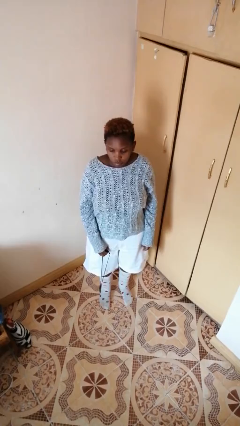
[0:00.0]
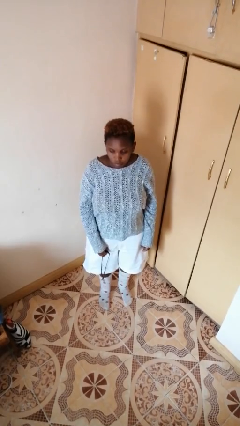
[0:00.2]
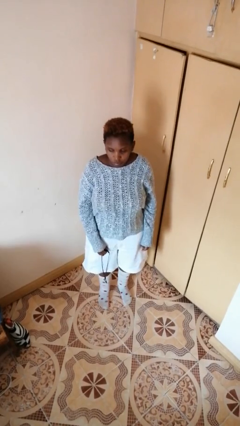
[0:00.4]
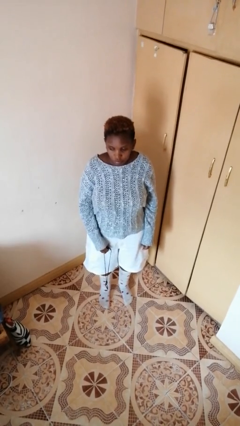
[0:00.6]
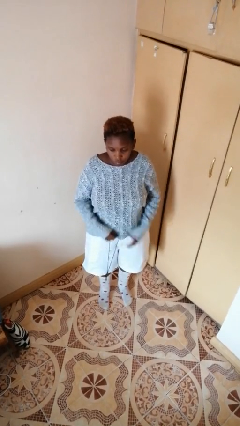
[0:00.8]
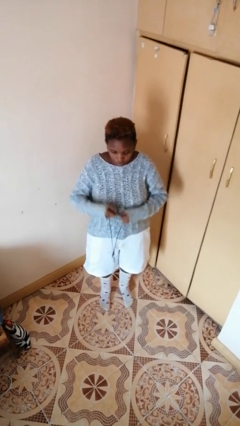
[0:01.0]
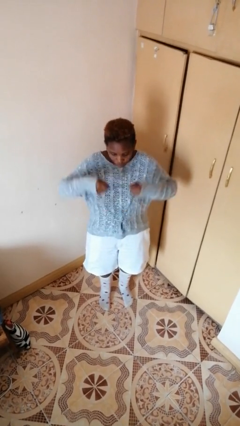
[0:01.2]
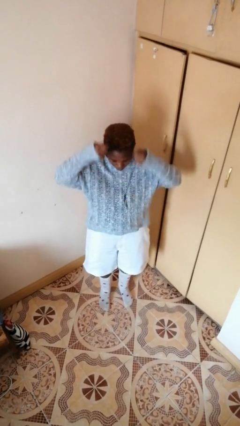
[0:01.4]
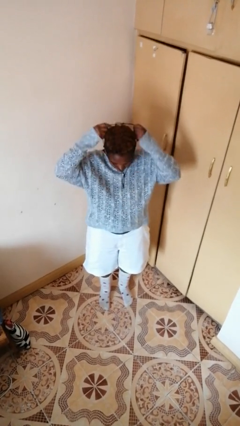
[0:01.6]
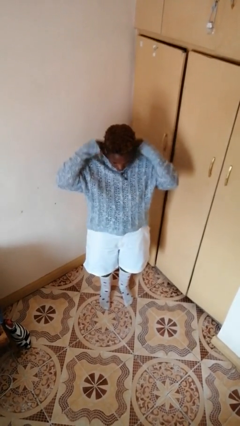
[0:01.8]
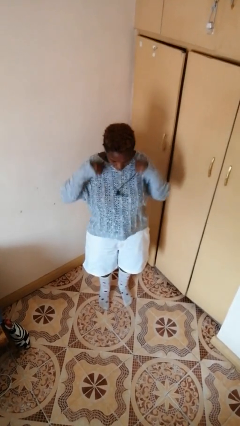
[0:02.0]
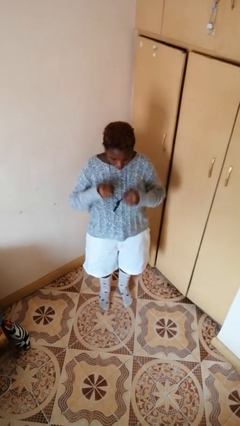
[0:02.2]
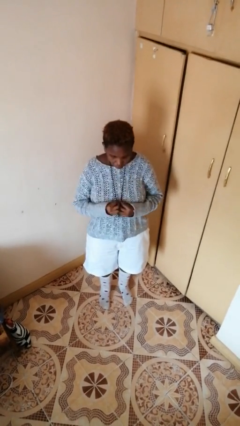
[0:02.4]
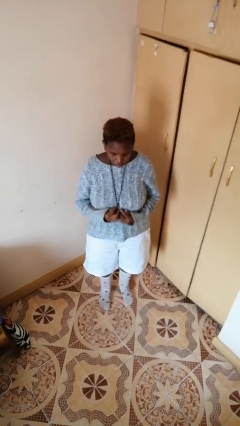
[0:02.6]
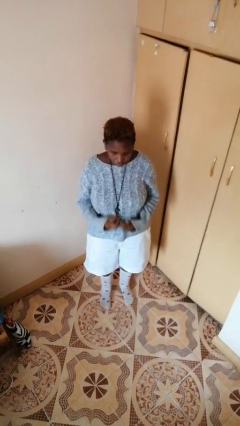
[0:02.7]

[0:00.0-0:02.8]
person puts on necklace

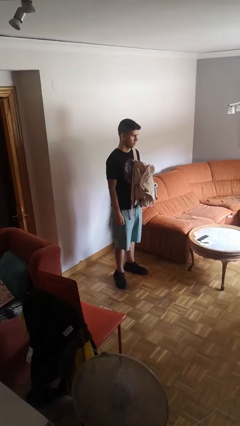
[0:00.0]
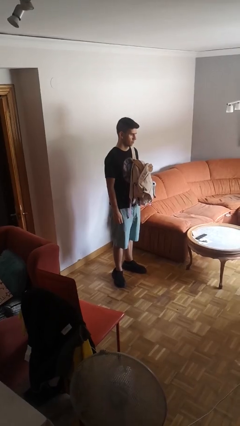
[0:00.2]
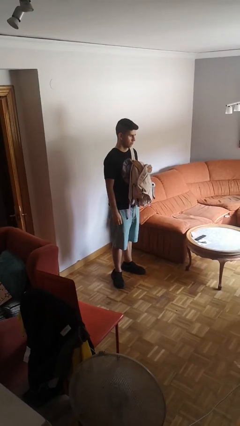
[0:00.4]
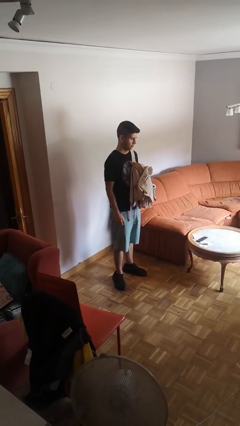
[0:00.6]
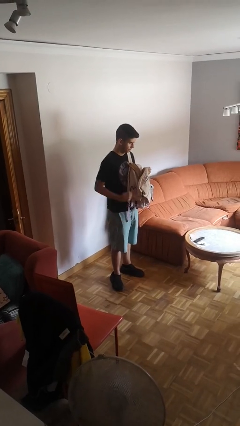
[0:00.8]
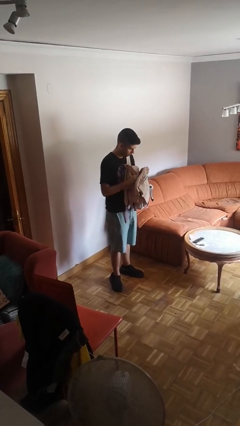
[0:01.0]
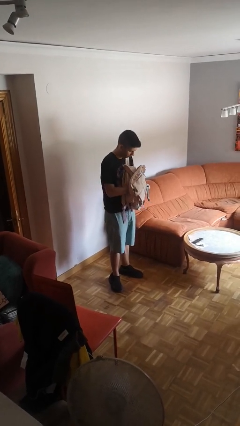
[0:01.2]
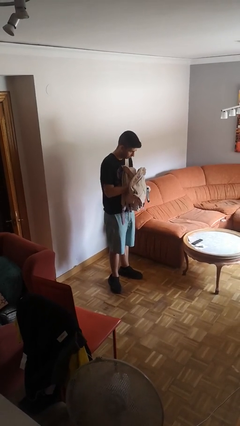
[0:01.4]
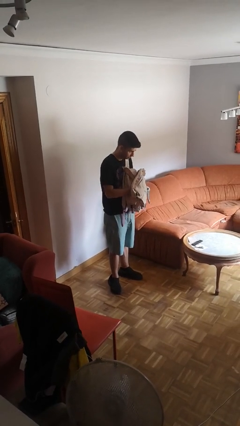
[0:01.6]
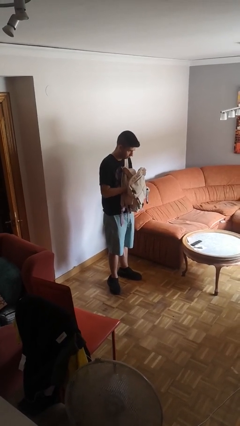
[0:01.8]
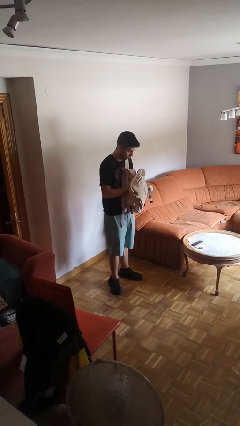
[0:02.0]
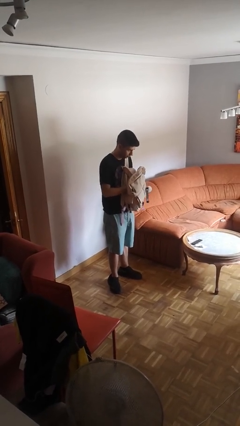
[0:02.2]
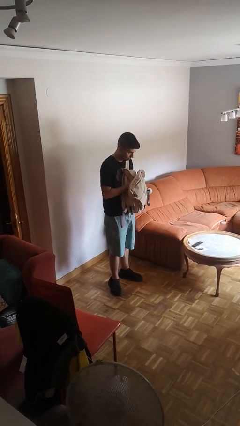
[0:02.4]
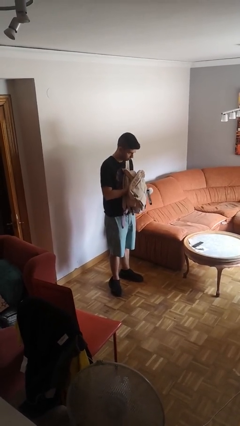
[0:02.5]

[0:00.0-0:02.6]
person searches in backpack

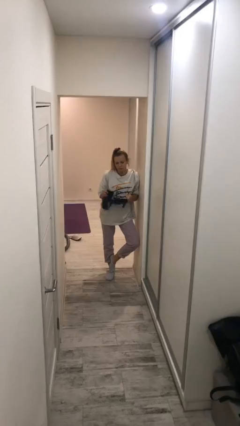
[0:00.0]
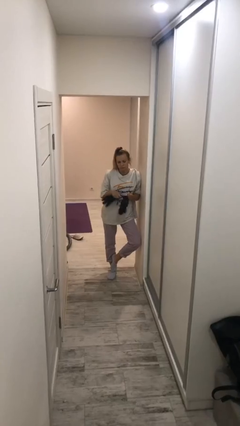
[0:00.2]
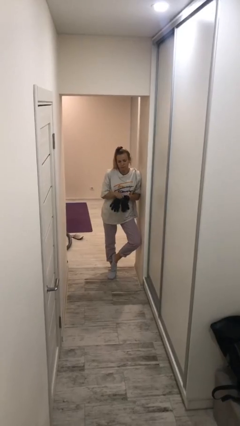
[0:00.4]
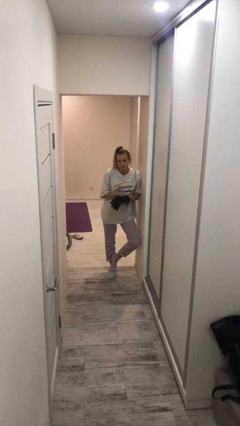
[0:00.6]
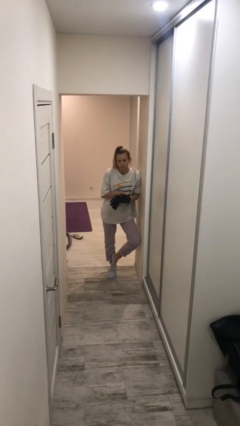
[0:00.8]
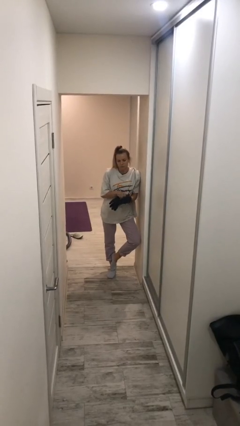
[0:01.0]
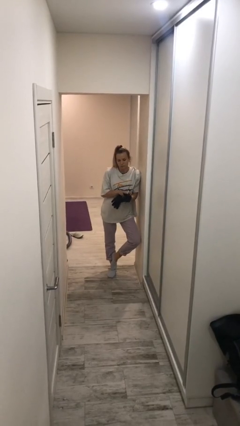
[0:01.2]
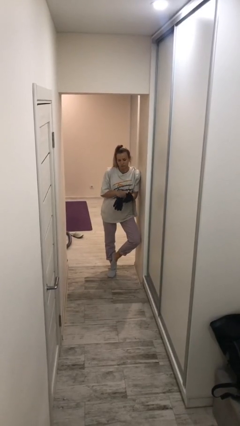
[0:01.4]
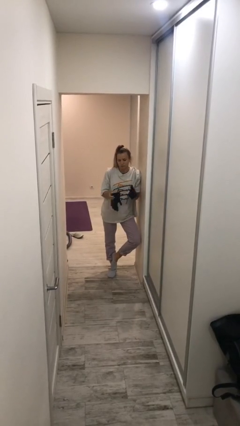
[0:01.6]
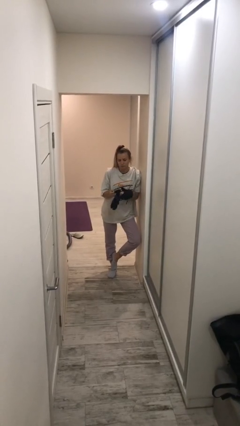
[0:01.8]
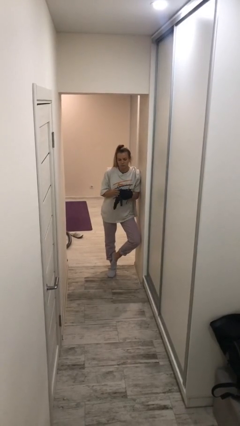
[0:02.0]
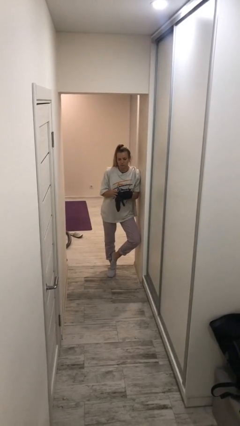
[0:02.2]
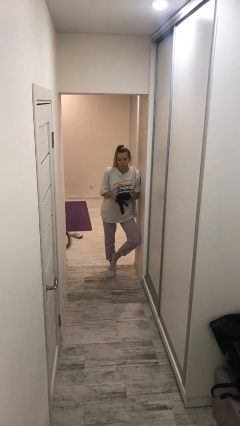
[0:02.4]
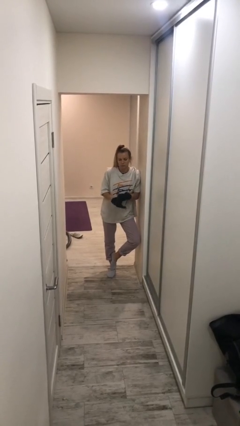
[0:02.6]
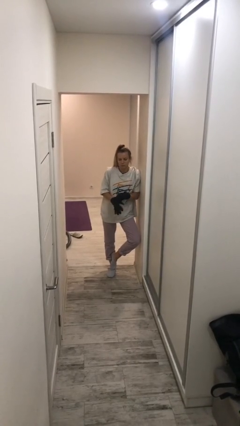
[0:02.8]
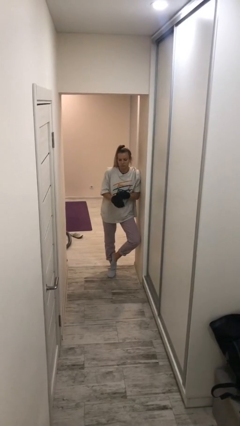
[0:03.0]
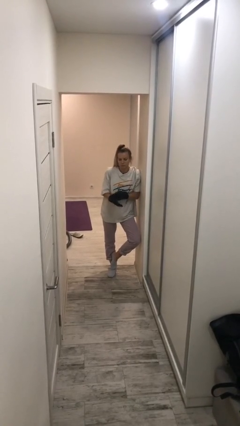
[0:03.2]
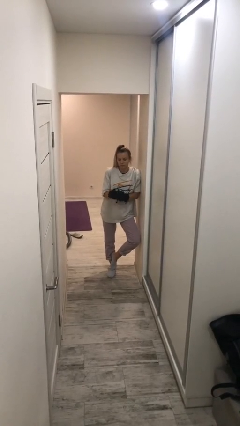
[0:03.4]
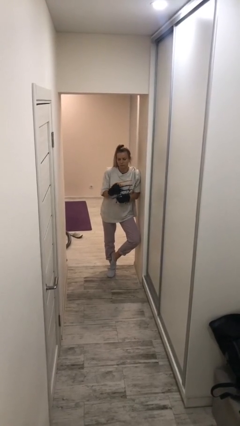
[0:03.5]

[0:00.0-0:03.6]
person puts on gloves

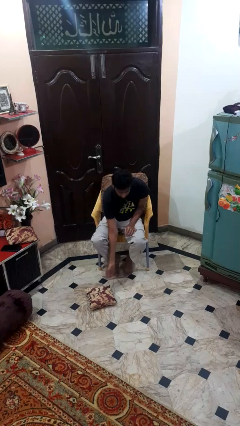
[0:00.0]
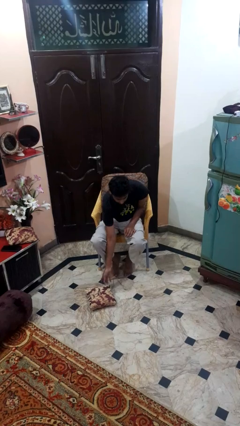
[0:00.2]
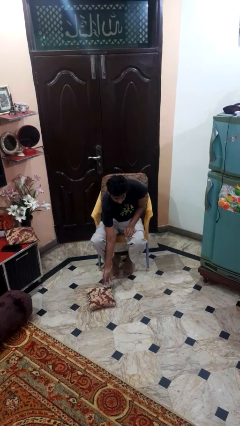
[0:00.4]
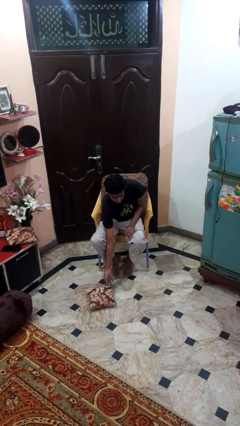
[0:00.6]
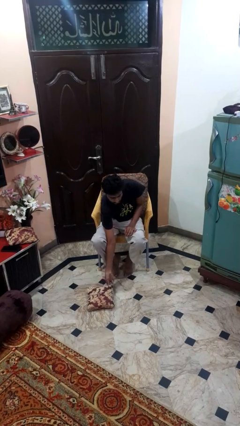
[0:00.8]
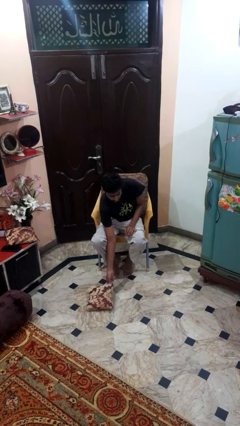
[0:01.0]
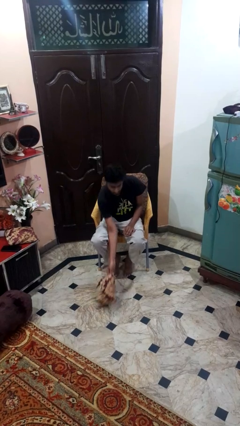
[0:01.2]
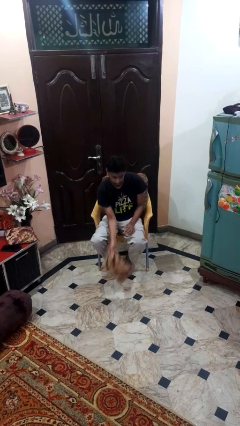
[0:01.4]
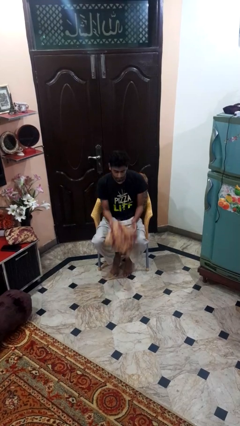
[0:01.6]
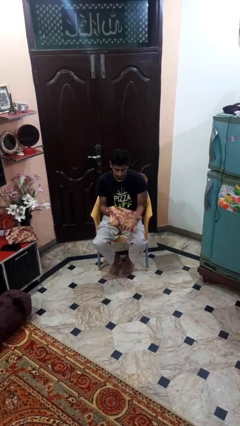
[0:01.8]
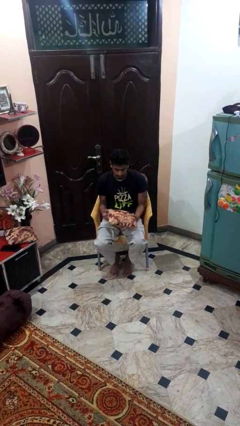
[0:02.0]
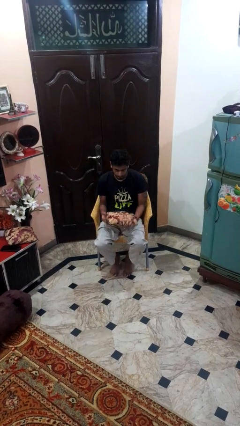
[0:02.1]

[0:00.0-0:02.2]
person picks up object from floor

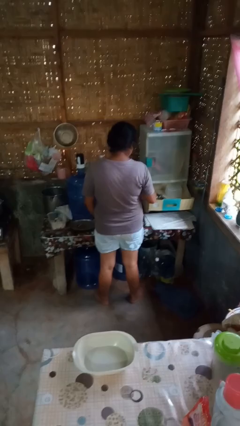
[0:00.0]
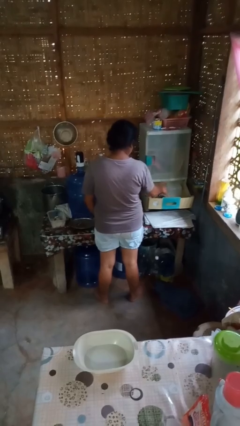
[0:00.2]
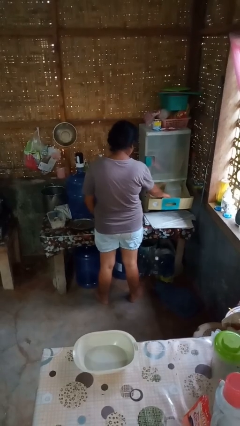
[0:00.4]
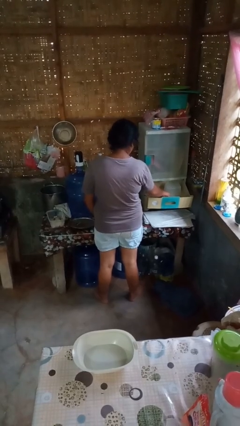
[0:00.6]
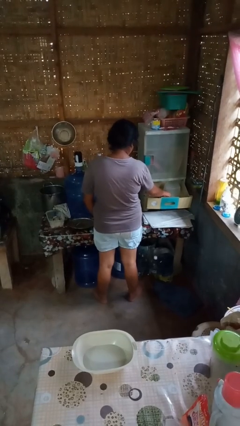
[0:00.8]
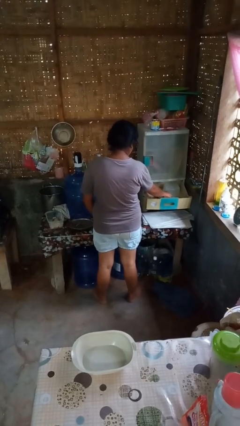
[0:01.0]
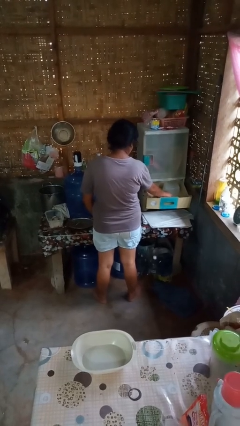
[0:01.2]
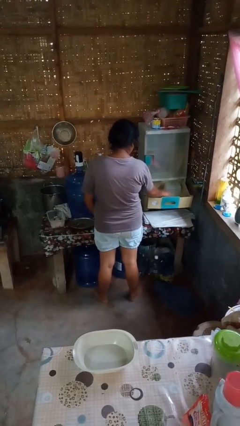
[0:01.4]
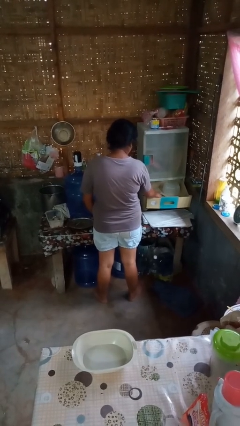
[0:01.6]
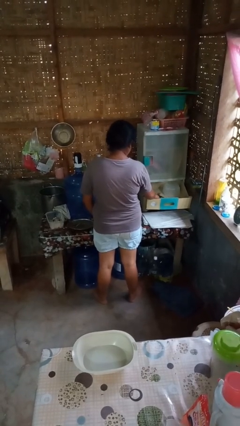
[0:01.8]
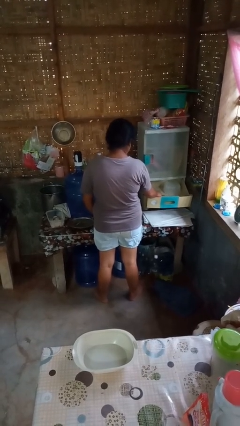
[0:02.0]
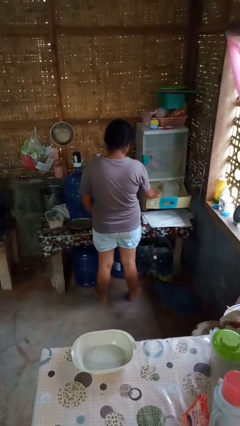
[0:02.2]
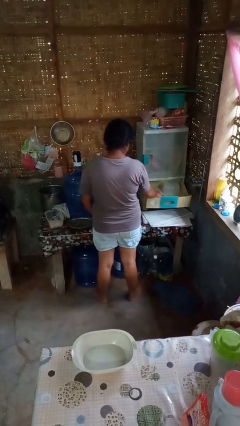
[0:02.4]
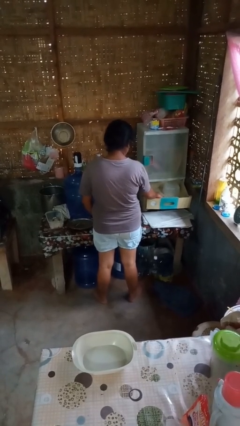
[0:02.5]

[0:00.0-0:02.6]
person searches in kitchen drawer

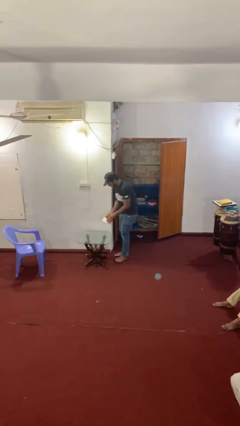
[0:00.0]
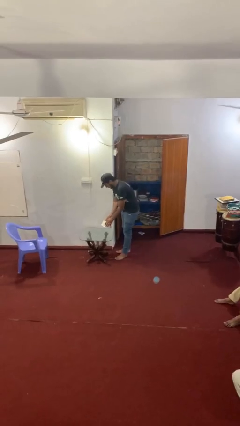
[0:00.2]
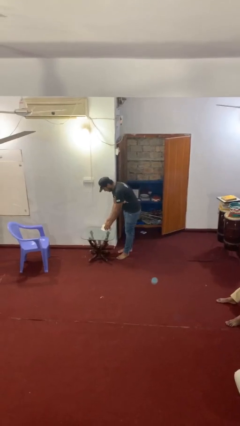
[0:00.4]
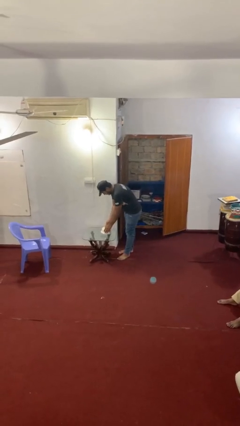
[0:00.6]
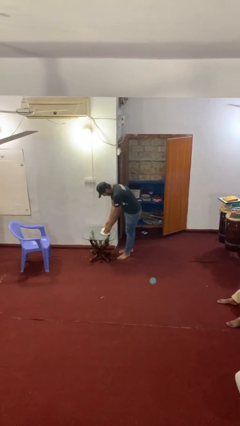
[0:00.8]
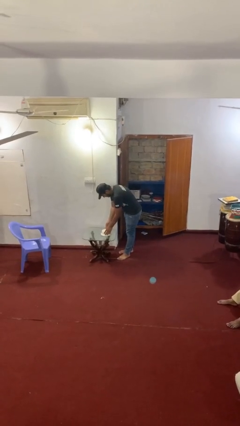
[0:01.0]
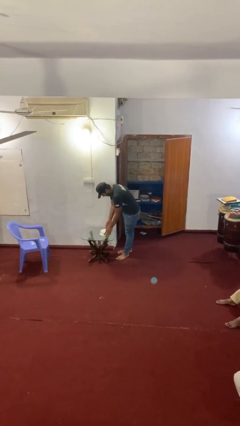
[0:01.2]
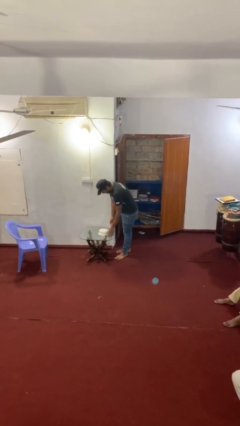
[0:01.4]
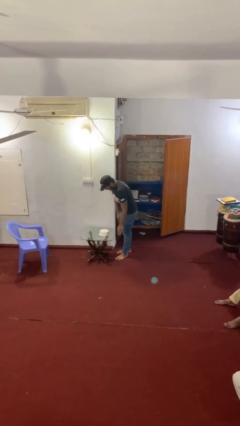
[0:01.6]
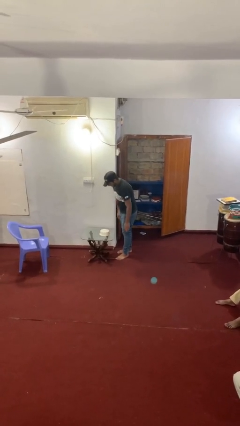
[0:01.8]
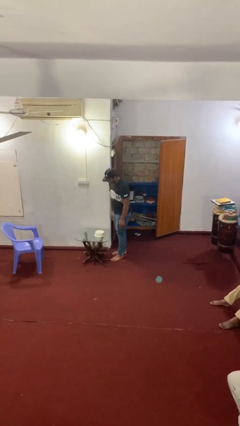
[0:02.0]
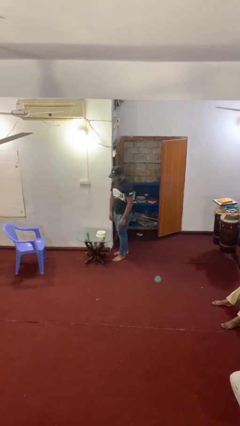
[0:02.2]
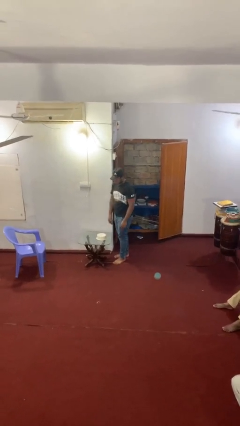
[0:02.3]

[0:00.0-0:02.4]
person puts down object on table

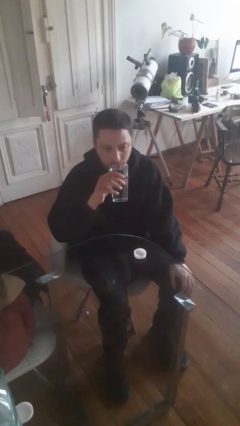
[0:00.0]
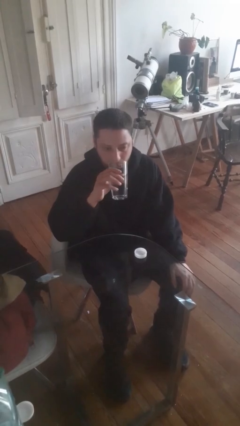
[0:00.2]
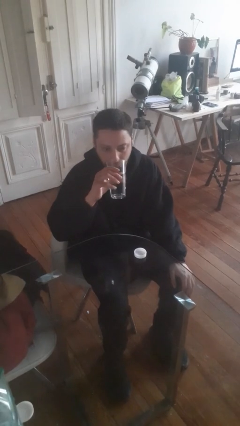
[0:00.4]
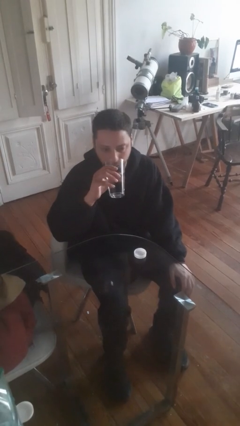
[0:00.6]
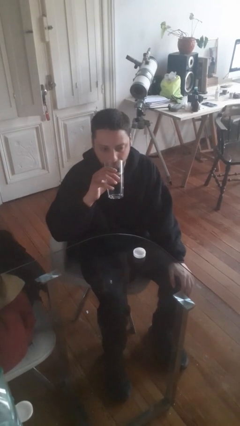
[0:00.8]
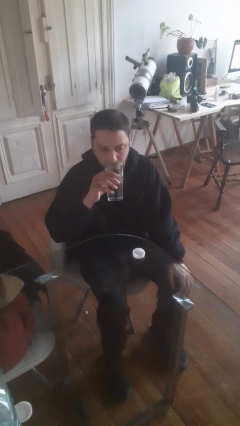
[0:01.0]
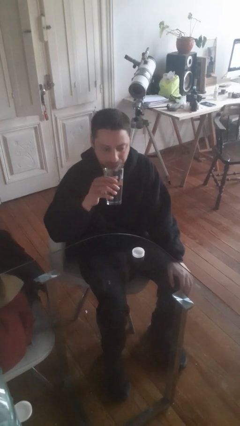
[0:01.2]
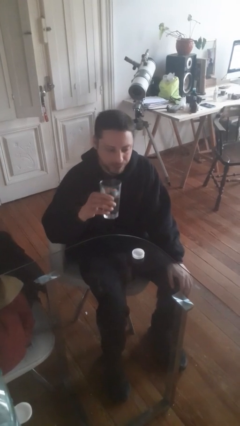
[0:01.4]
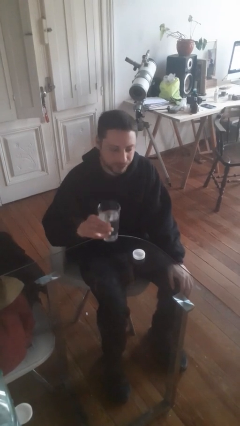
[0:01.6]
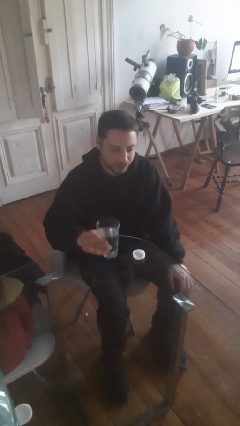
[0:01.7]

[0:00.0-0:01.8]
person drinks from cup
